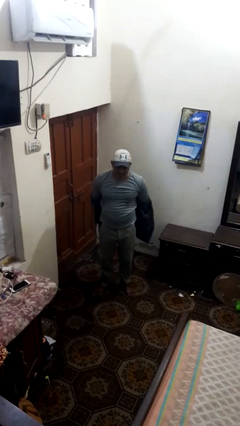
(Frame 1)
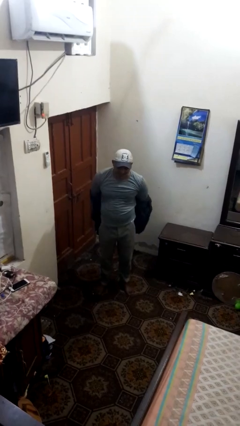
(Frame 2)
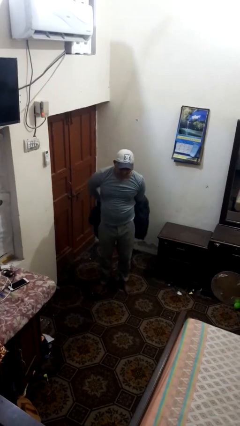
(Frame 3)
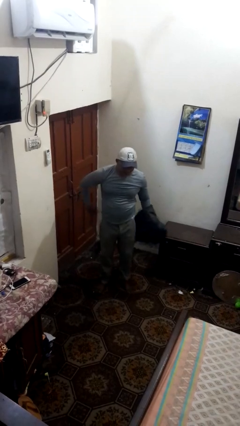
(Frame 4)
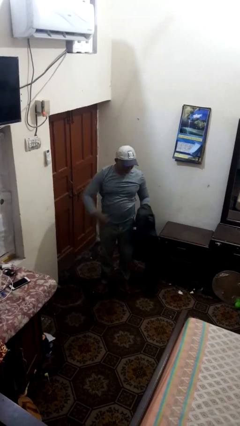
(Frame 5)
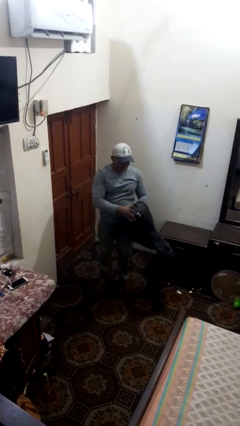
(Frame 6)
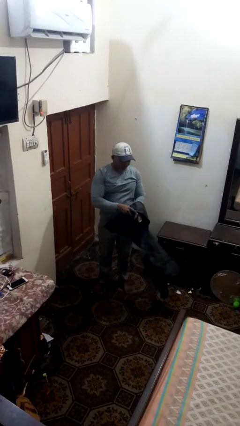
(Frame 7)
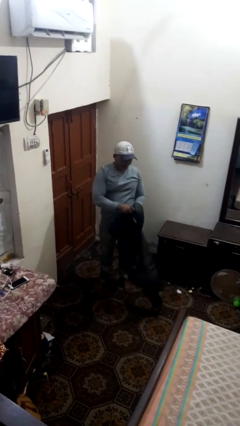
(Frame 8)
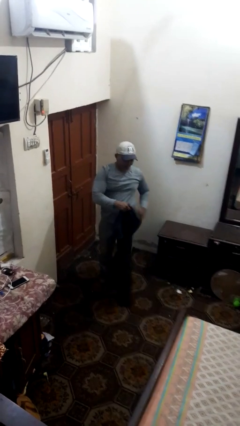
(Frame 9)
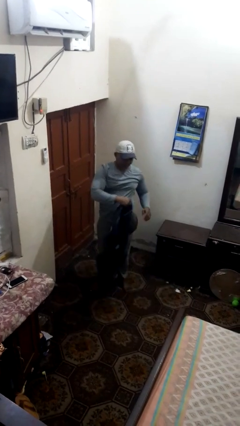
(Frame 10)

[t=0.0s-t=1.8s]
person takes off jacket

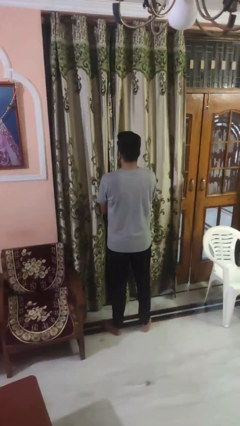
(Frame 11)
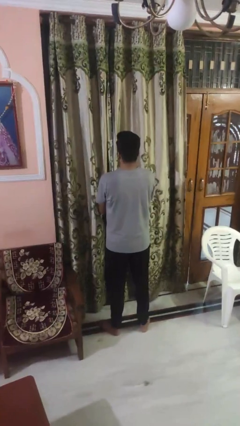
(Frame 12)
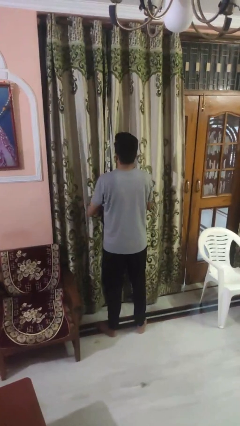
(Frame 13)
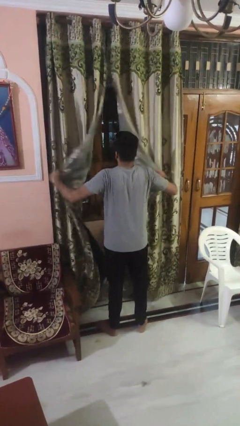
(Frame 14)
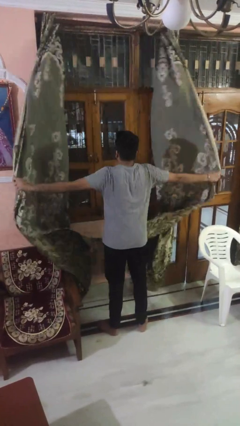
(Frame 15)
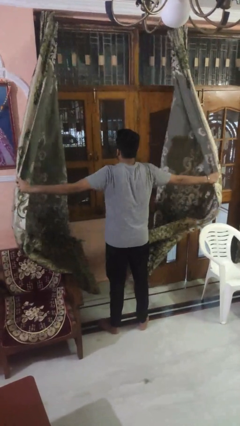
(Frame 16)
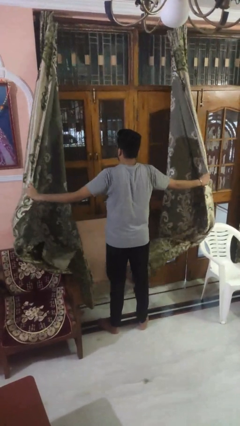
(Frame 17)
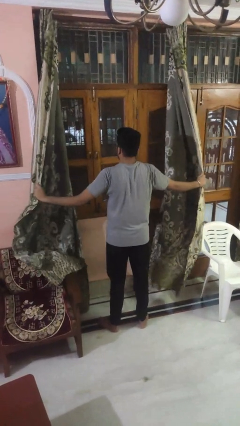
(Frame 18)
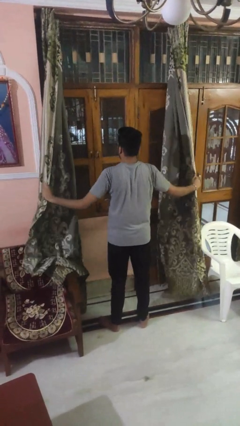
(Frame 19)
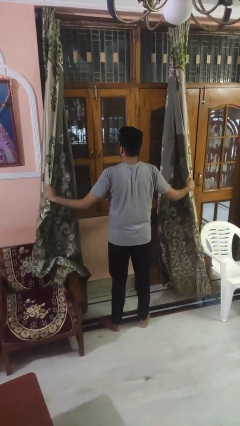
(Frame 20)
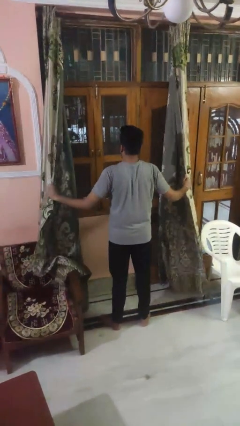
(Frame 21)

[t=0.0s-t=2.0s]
person opens curtains

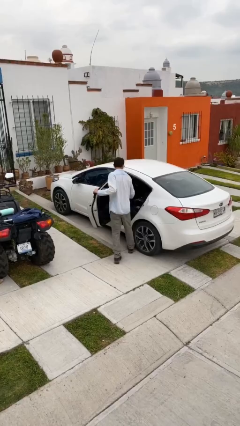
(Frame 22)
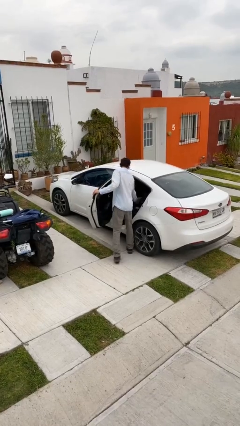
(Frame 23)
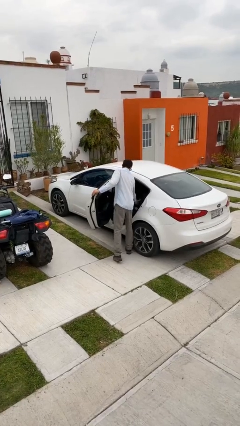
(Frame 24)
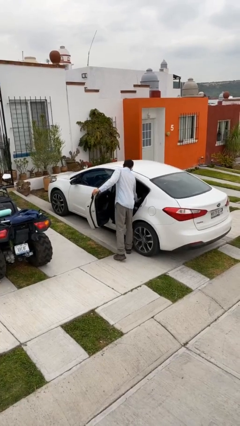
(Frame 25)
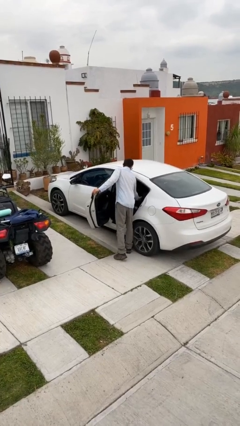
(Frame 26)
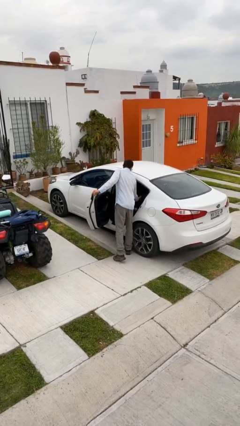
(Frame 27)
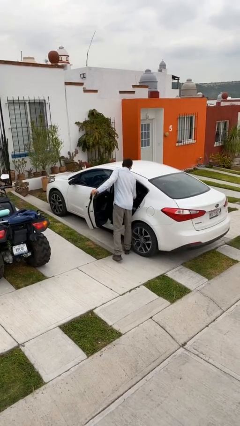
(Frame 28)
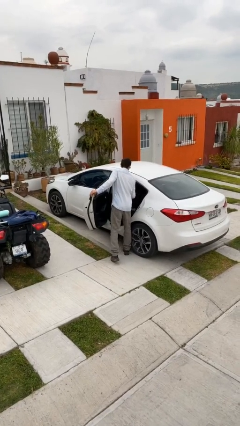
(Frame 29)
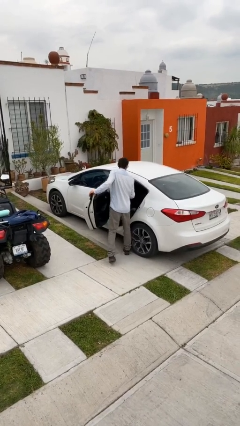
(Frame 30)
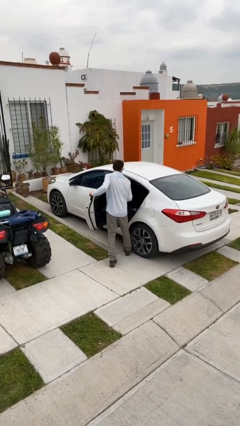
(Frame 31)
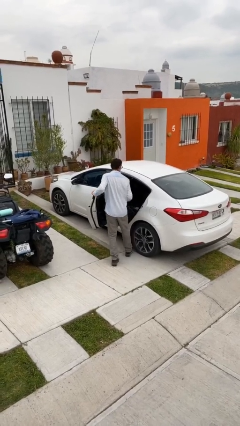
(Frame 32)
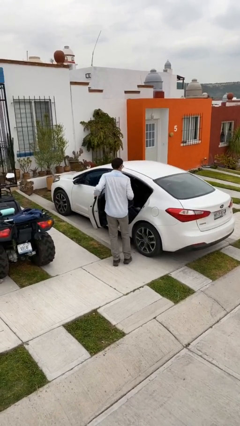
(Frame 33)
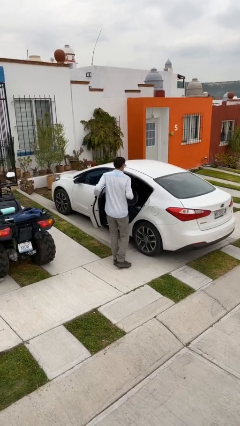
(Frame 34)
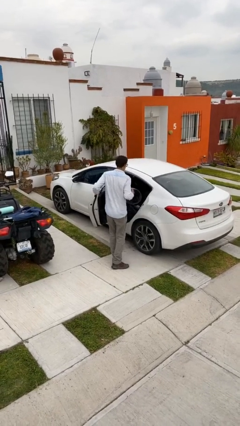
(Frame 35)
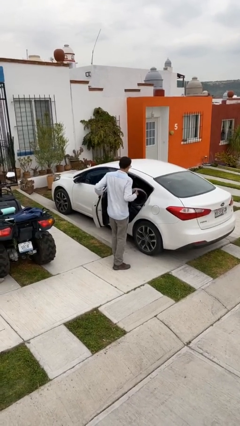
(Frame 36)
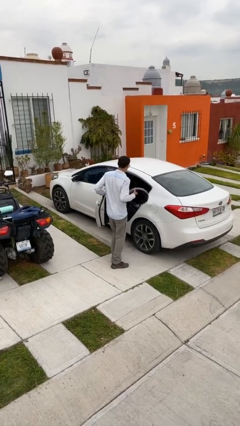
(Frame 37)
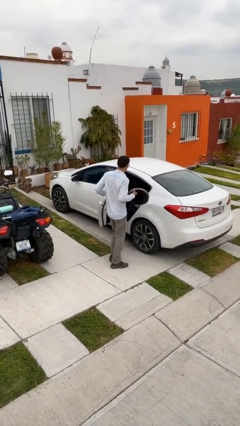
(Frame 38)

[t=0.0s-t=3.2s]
person unloads car

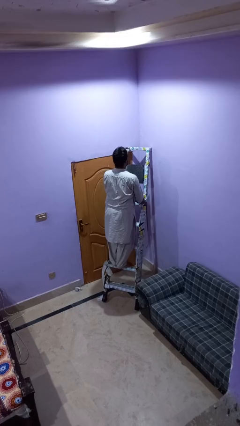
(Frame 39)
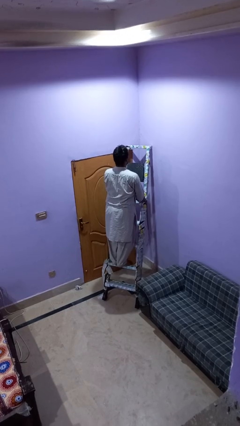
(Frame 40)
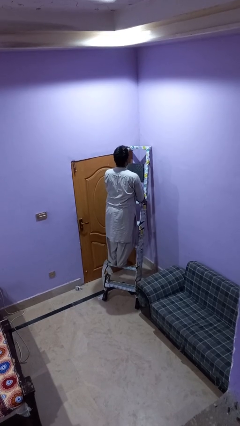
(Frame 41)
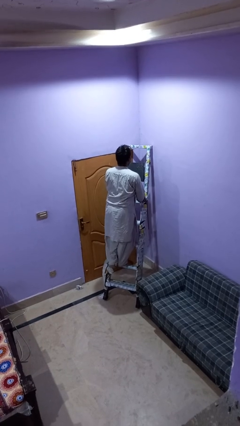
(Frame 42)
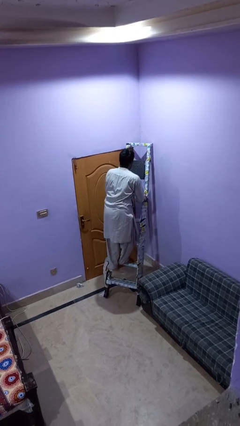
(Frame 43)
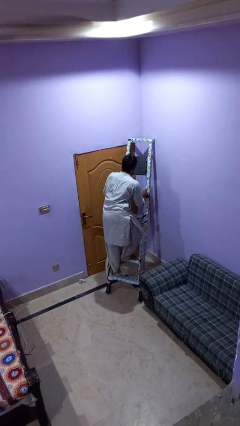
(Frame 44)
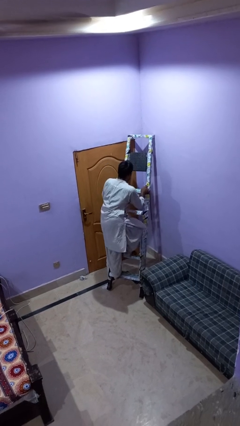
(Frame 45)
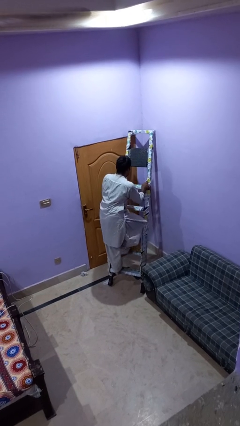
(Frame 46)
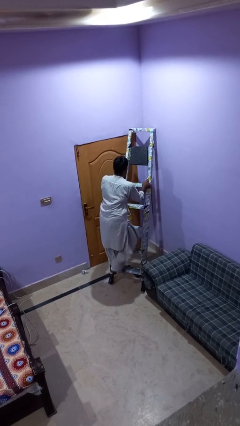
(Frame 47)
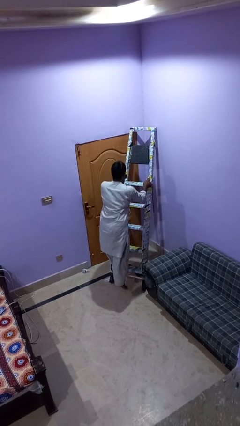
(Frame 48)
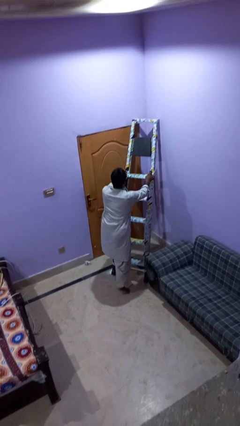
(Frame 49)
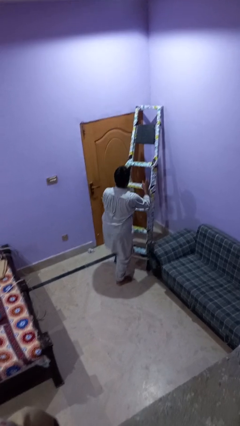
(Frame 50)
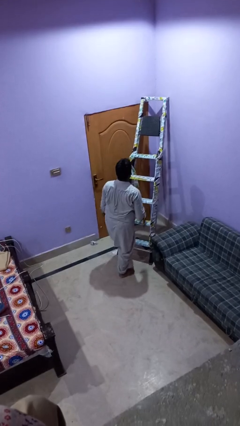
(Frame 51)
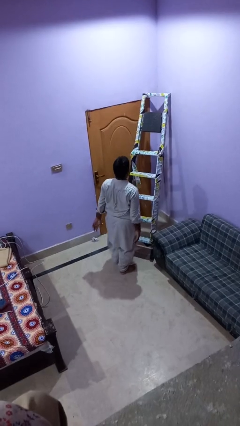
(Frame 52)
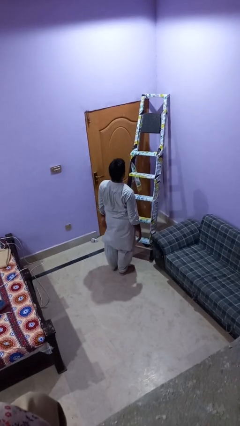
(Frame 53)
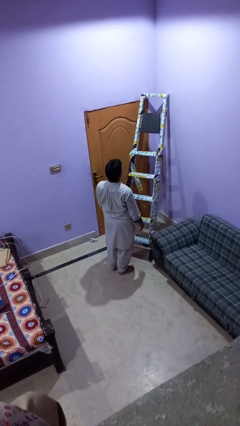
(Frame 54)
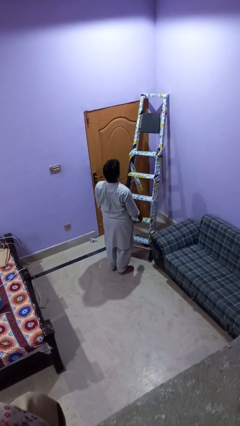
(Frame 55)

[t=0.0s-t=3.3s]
person climbs off chair

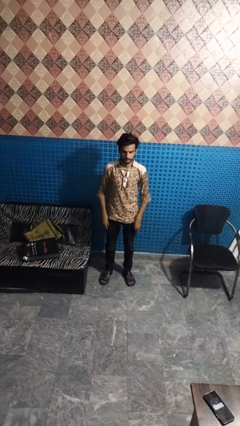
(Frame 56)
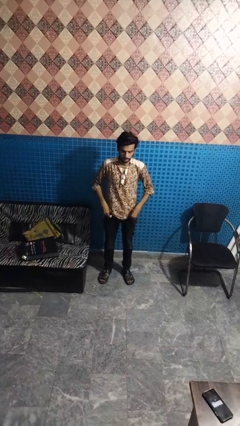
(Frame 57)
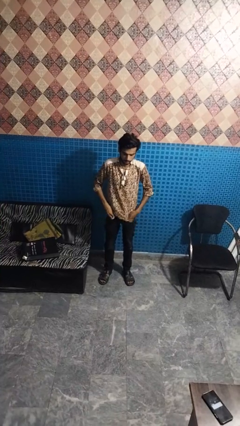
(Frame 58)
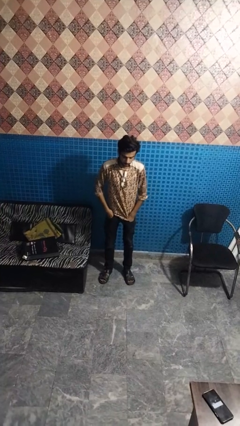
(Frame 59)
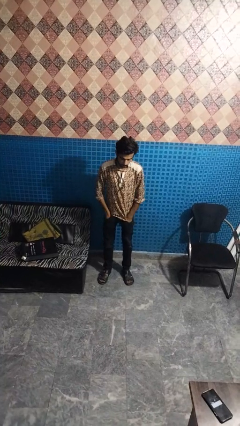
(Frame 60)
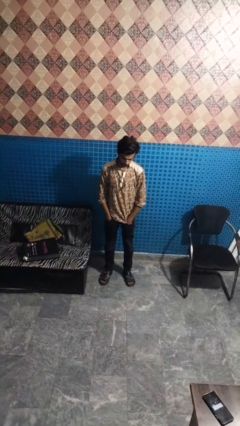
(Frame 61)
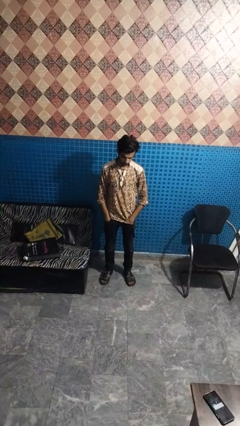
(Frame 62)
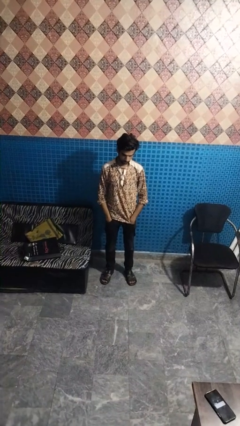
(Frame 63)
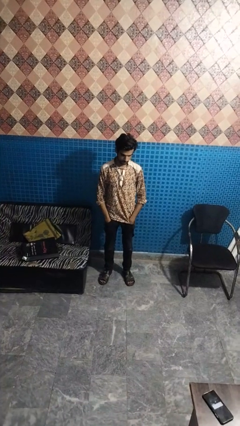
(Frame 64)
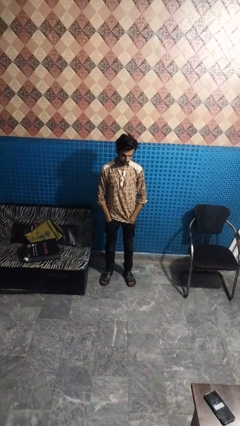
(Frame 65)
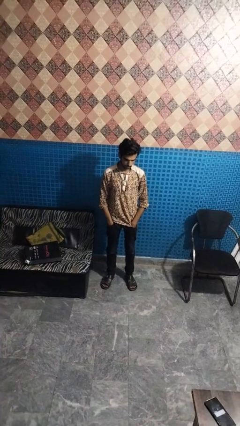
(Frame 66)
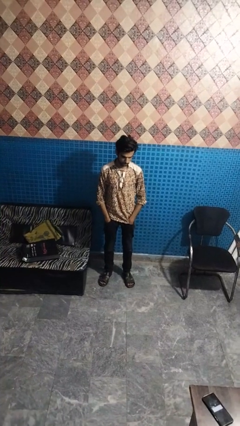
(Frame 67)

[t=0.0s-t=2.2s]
person puts hands in back pockets

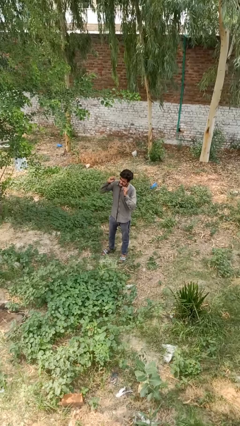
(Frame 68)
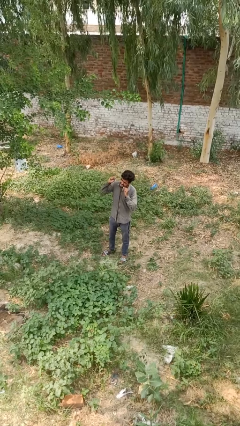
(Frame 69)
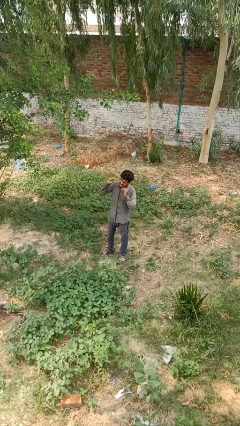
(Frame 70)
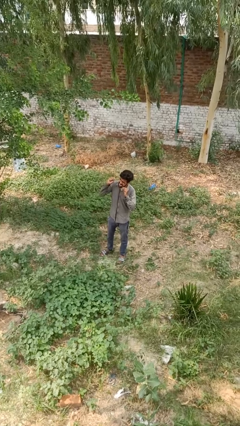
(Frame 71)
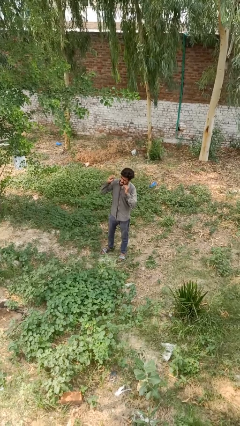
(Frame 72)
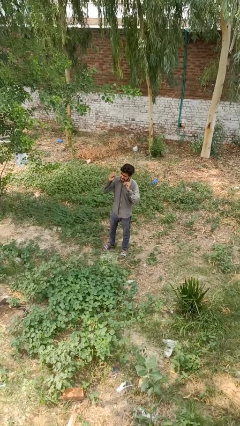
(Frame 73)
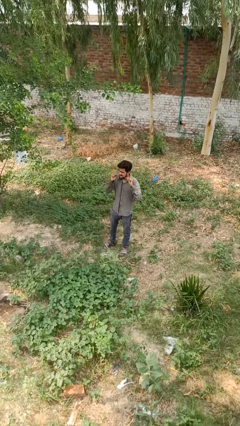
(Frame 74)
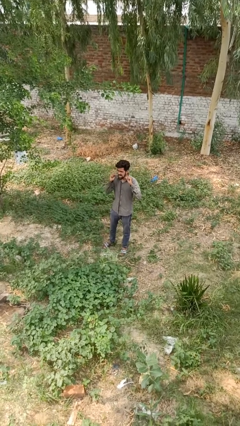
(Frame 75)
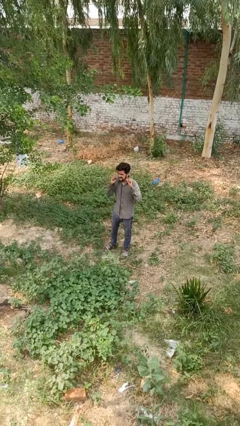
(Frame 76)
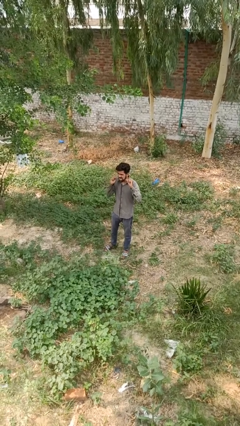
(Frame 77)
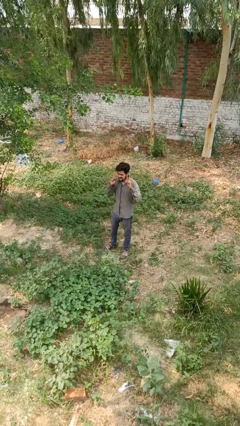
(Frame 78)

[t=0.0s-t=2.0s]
person flosses

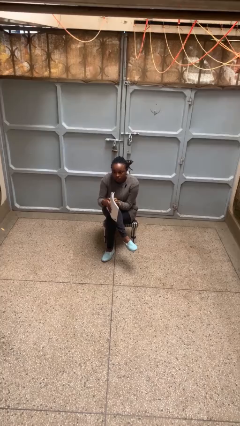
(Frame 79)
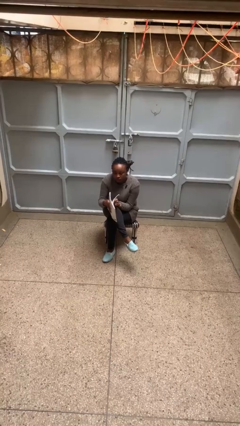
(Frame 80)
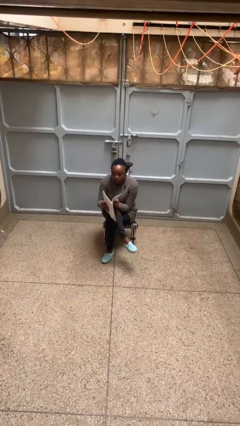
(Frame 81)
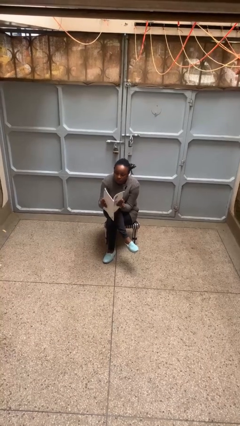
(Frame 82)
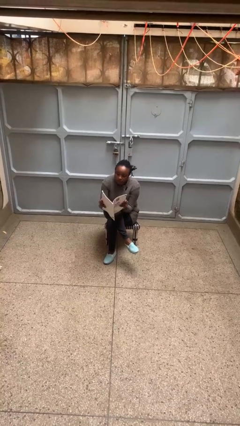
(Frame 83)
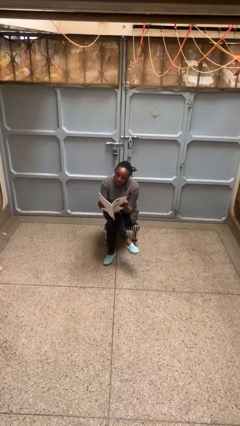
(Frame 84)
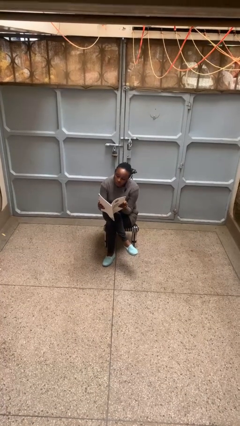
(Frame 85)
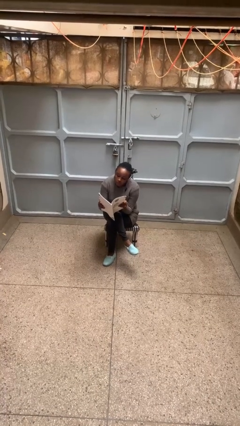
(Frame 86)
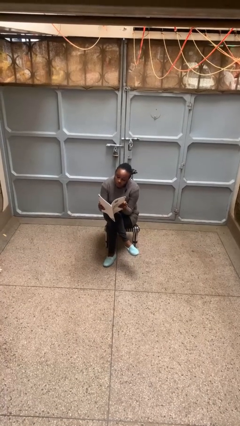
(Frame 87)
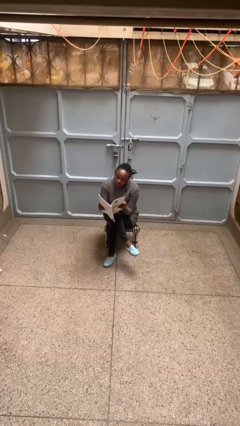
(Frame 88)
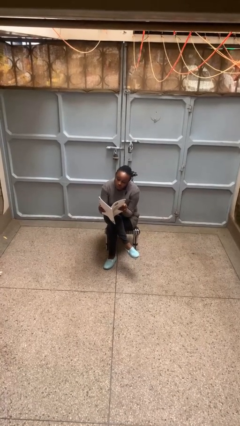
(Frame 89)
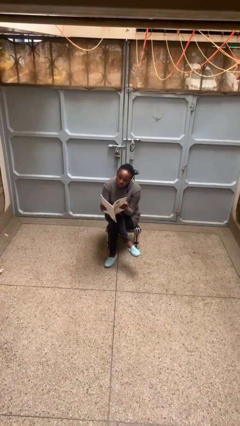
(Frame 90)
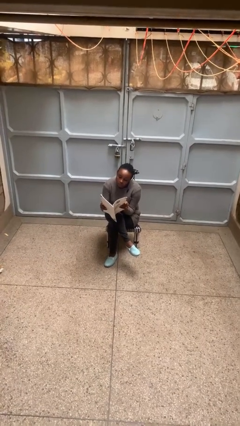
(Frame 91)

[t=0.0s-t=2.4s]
person reads magazine
